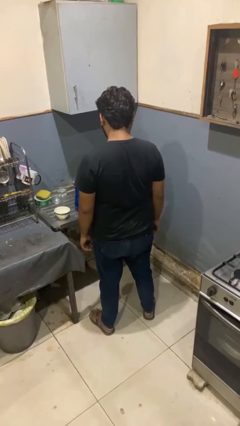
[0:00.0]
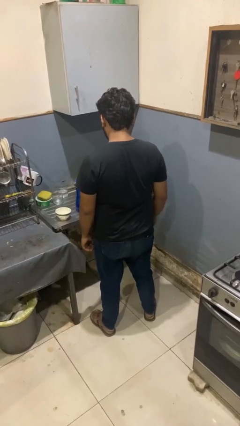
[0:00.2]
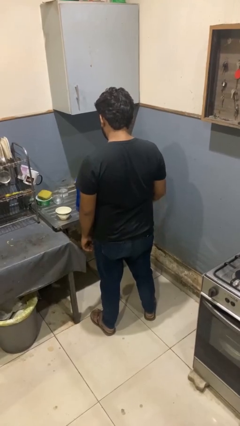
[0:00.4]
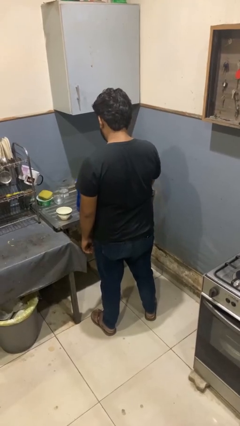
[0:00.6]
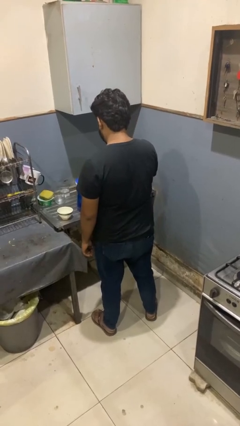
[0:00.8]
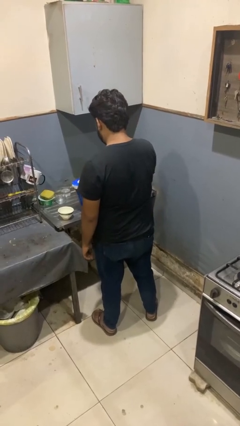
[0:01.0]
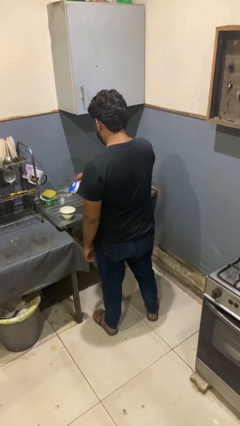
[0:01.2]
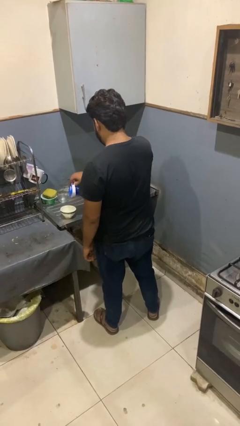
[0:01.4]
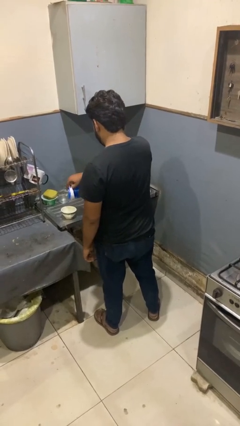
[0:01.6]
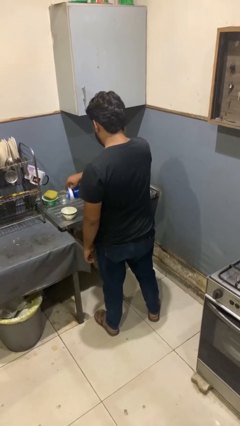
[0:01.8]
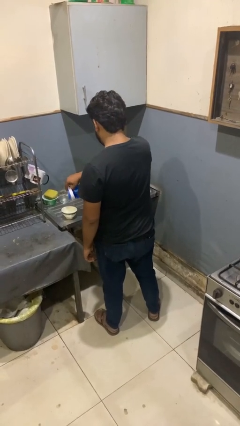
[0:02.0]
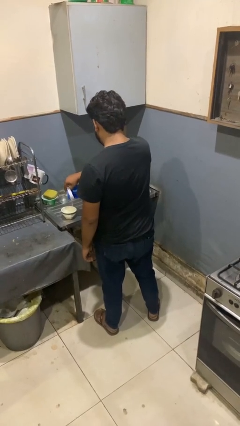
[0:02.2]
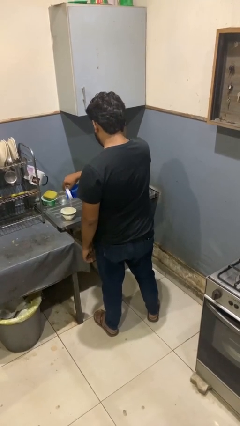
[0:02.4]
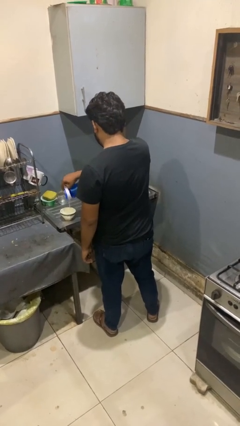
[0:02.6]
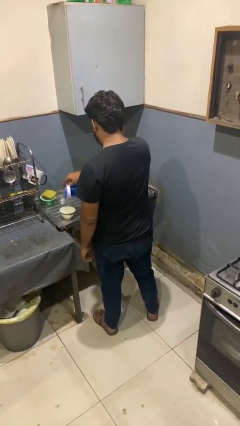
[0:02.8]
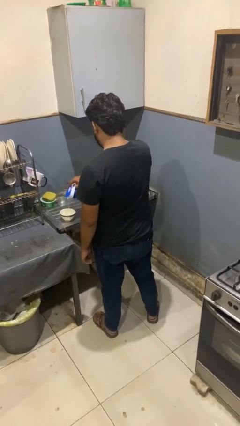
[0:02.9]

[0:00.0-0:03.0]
person pours into bowl

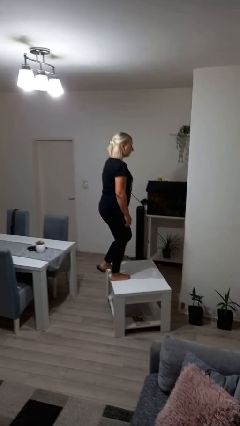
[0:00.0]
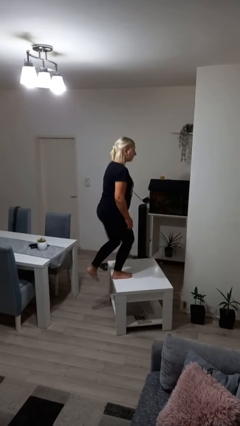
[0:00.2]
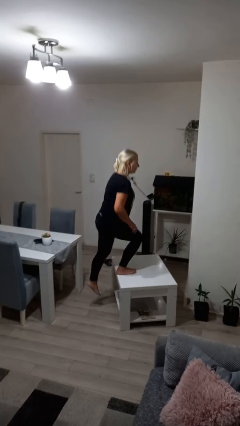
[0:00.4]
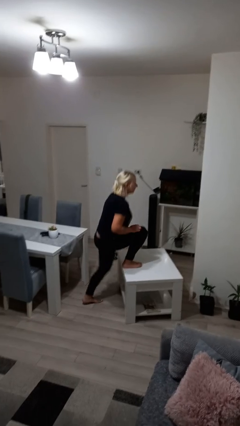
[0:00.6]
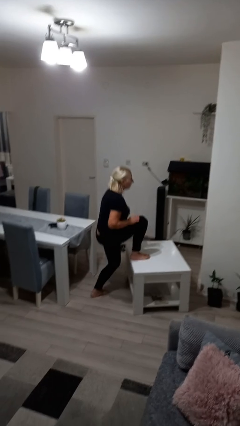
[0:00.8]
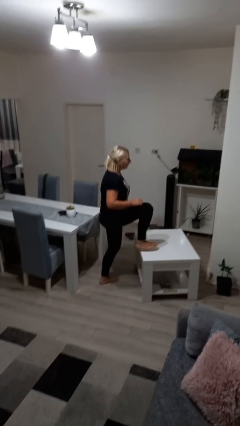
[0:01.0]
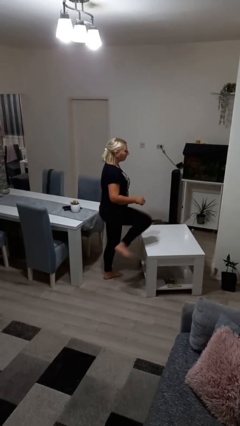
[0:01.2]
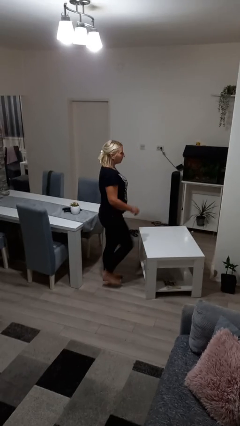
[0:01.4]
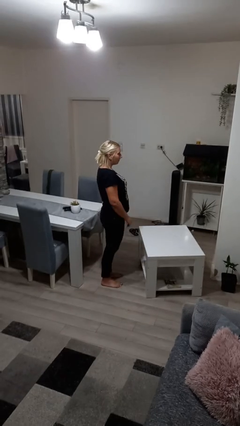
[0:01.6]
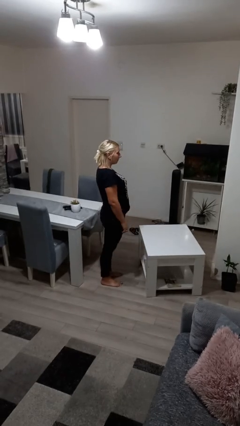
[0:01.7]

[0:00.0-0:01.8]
person climbs off table

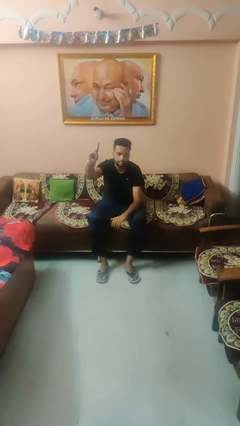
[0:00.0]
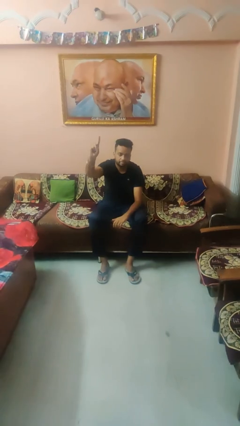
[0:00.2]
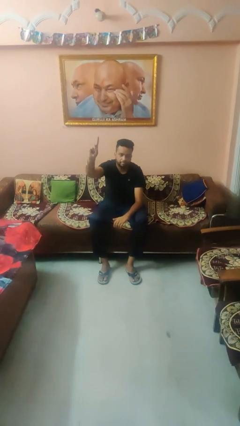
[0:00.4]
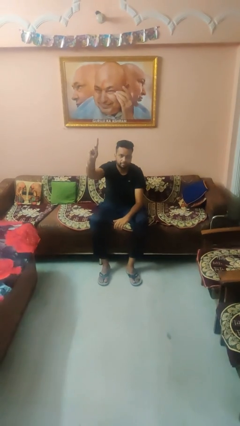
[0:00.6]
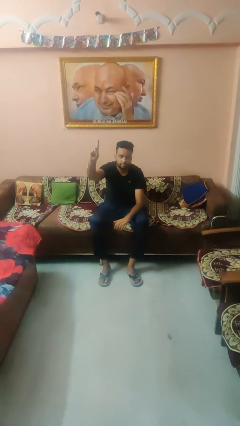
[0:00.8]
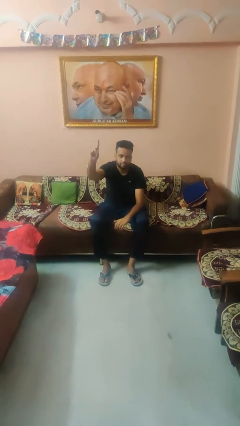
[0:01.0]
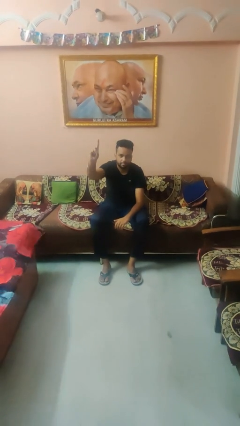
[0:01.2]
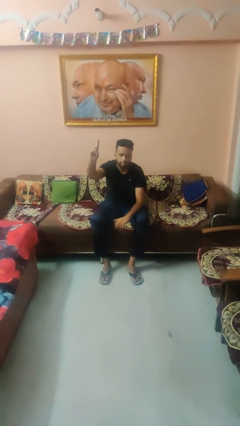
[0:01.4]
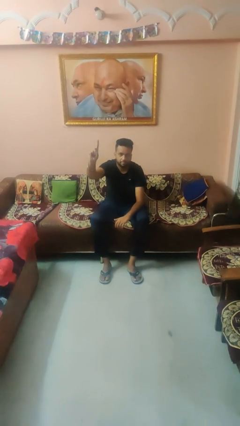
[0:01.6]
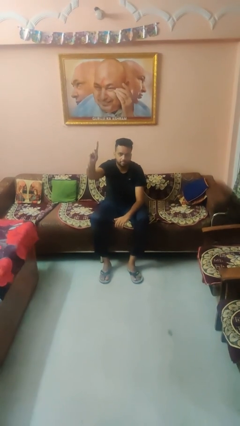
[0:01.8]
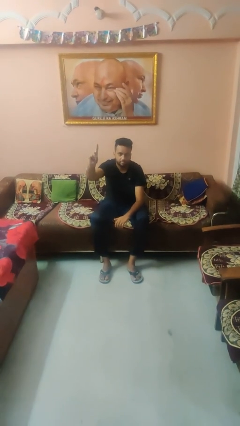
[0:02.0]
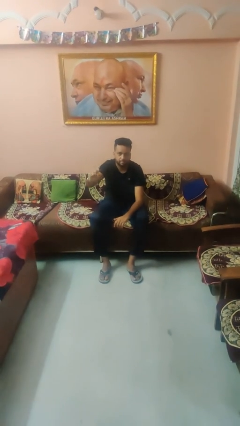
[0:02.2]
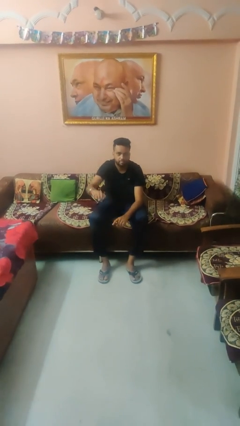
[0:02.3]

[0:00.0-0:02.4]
person gestures number one

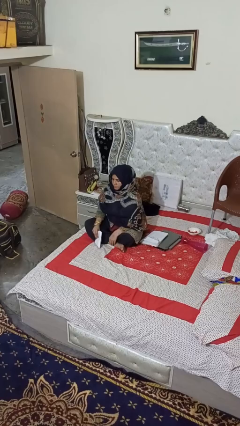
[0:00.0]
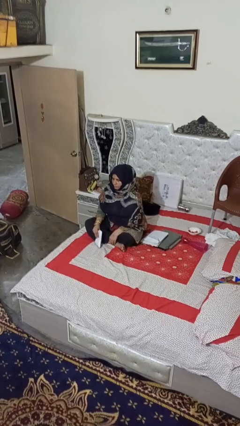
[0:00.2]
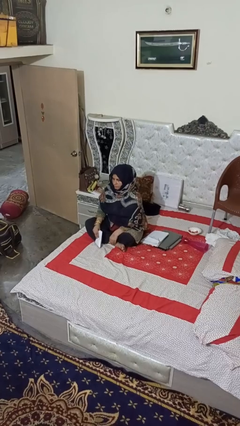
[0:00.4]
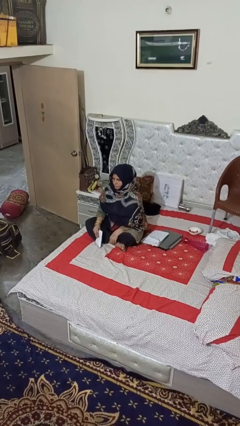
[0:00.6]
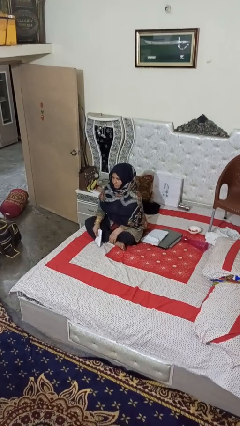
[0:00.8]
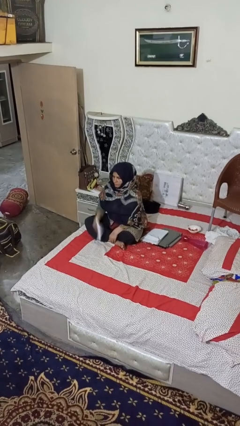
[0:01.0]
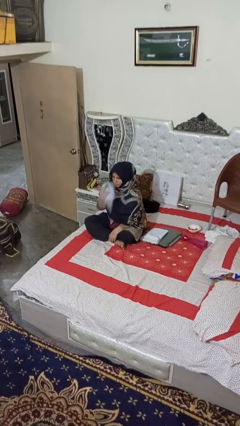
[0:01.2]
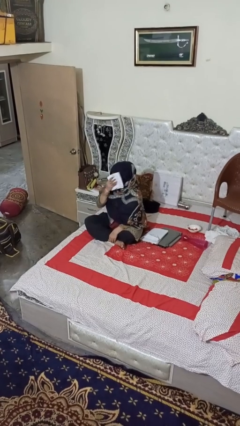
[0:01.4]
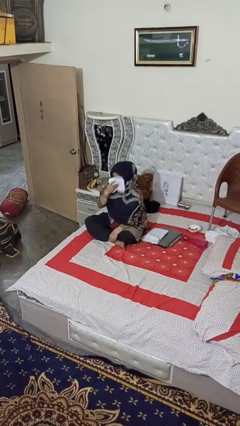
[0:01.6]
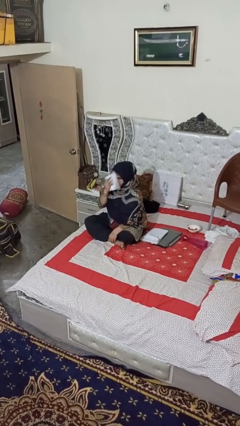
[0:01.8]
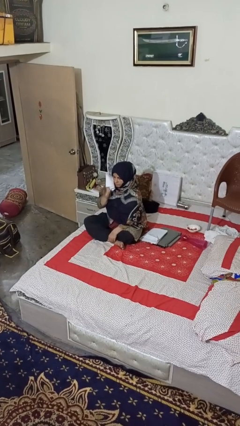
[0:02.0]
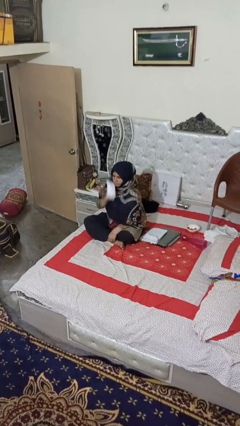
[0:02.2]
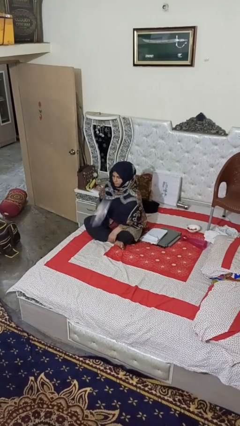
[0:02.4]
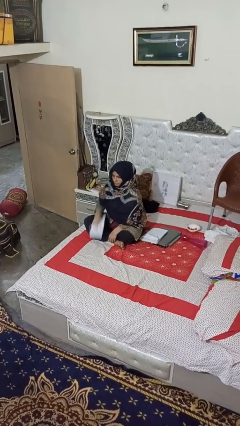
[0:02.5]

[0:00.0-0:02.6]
person wipes mouth with napkin

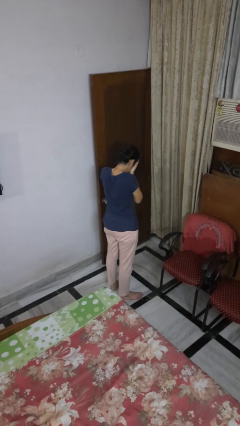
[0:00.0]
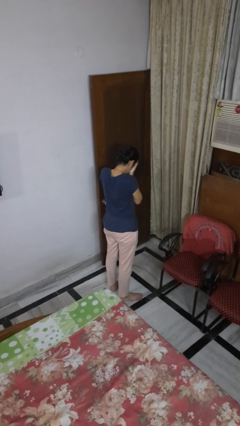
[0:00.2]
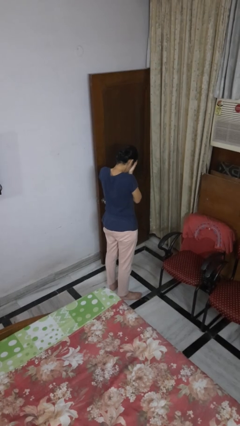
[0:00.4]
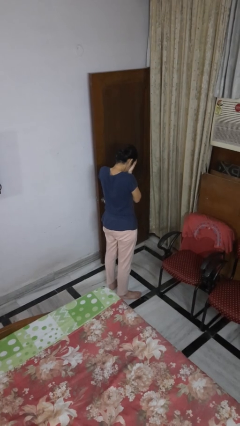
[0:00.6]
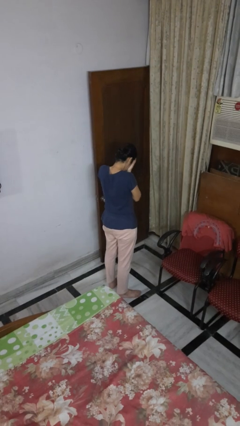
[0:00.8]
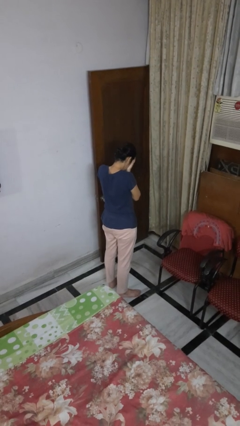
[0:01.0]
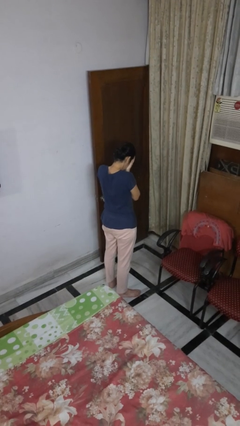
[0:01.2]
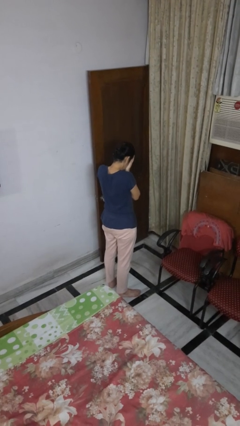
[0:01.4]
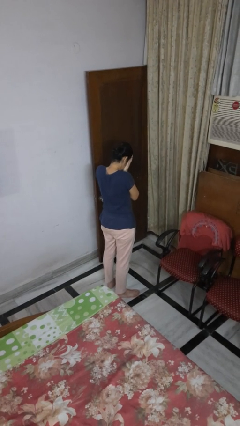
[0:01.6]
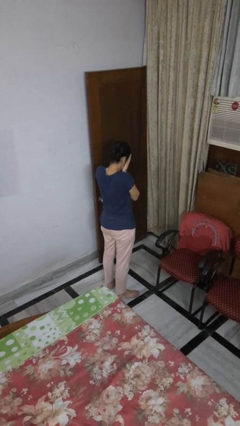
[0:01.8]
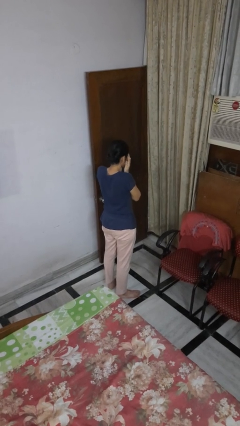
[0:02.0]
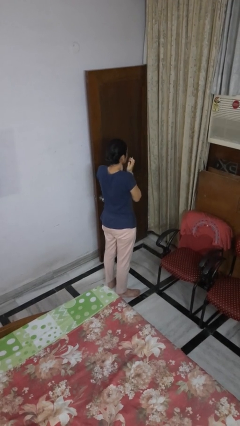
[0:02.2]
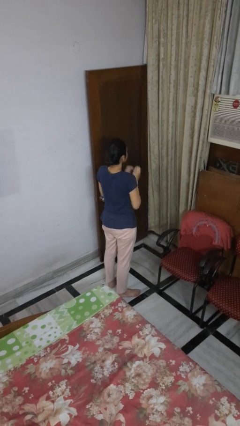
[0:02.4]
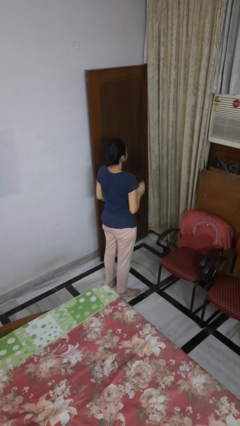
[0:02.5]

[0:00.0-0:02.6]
person covers face with hands

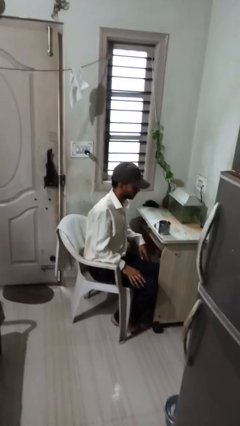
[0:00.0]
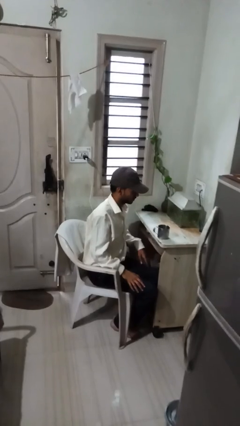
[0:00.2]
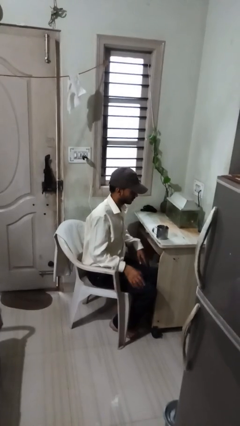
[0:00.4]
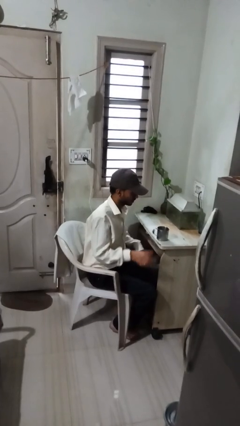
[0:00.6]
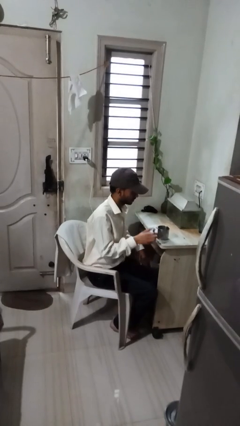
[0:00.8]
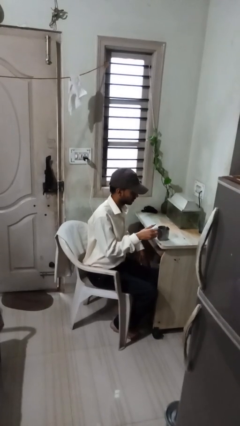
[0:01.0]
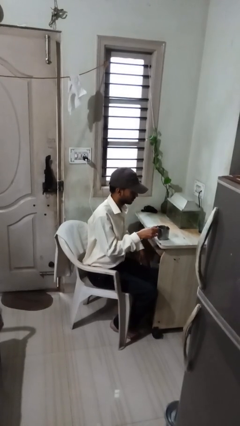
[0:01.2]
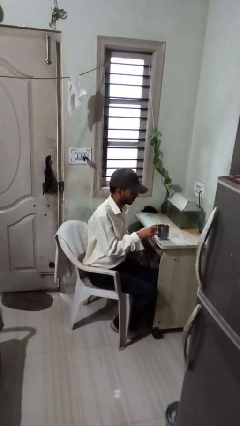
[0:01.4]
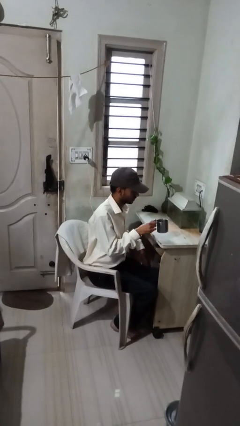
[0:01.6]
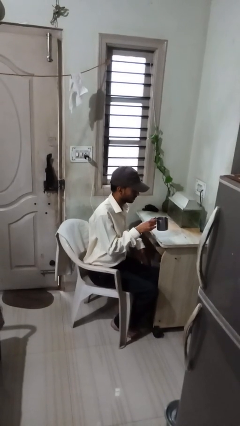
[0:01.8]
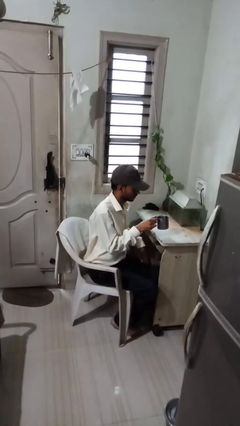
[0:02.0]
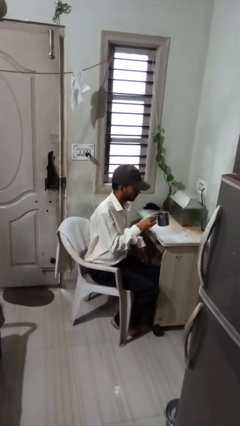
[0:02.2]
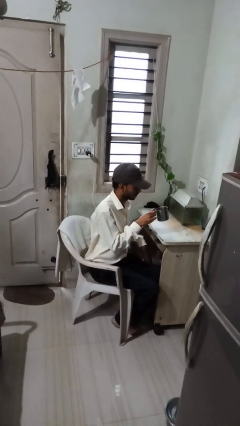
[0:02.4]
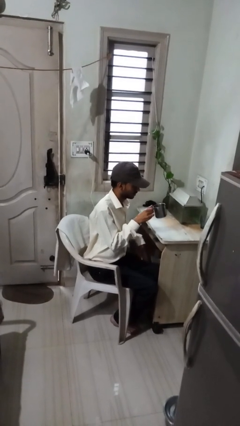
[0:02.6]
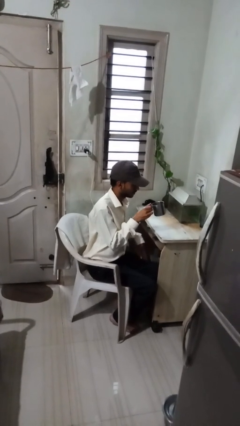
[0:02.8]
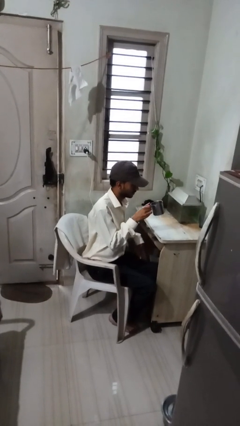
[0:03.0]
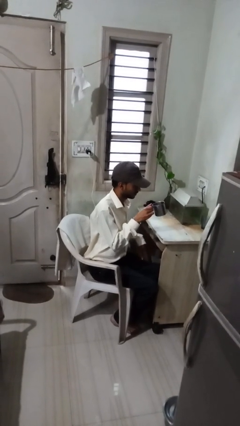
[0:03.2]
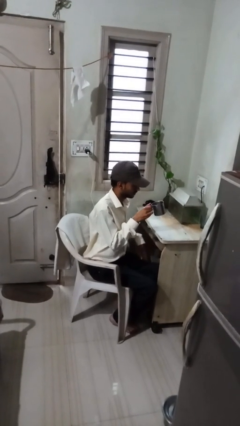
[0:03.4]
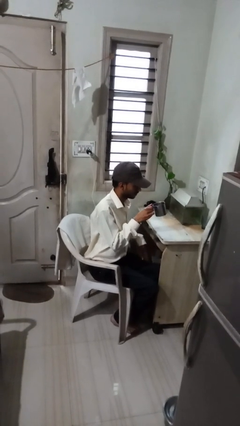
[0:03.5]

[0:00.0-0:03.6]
person picks up object from table

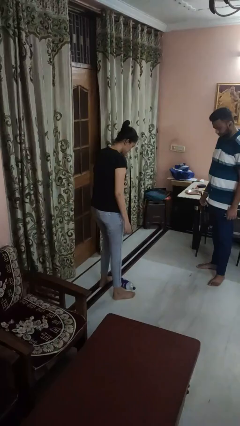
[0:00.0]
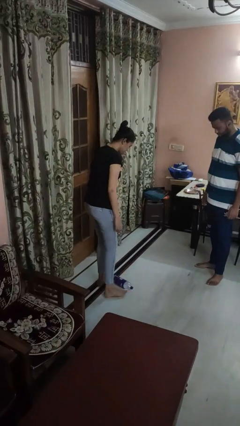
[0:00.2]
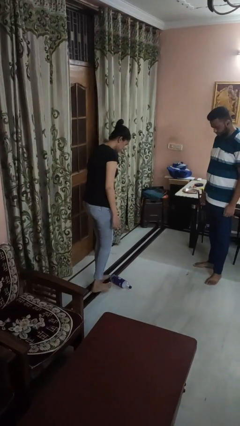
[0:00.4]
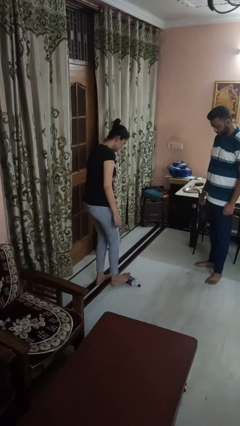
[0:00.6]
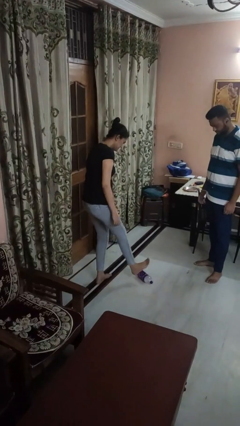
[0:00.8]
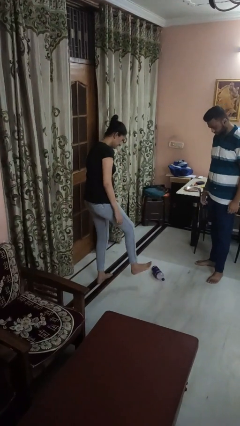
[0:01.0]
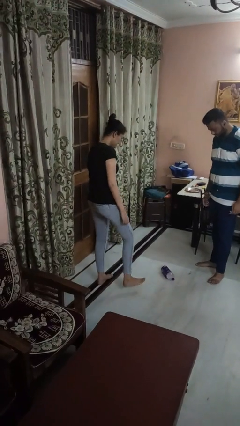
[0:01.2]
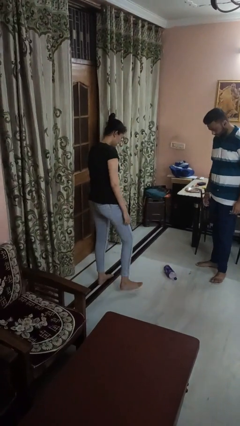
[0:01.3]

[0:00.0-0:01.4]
person kicks object to person
